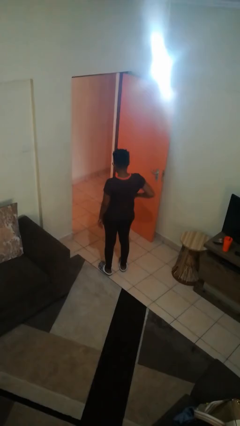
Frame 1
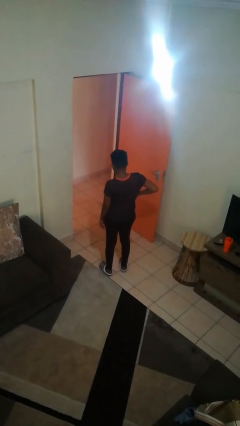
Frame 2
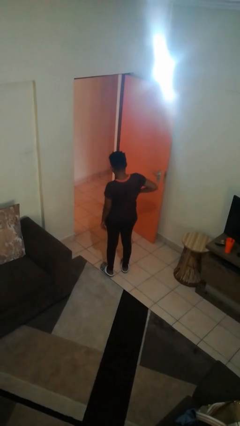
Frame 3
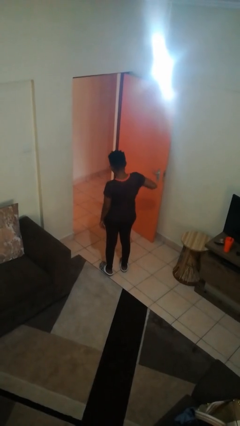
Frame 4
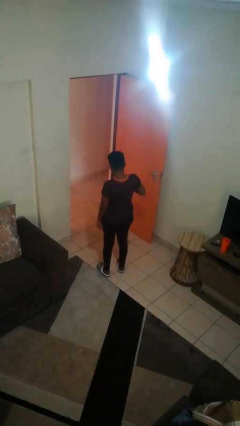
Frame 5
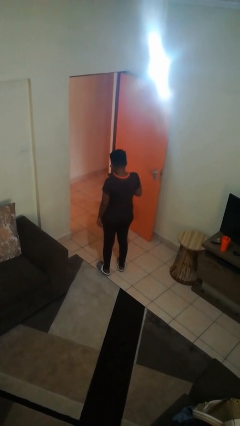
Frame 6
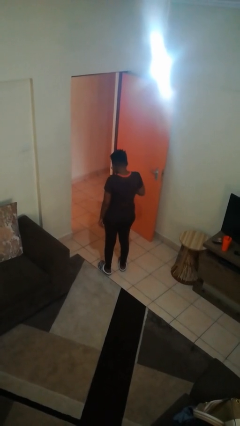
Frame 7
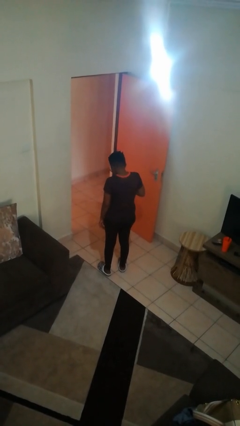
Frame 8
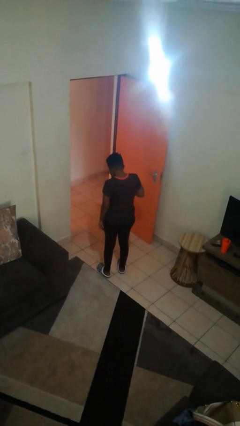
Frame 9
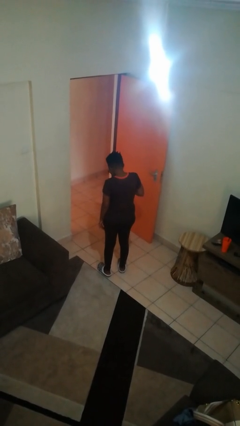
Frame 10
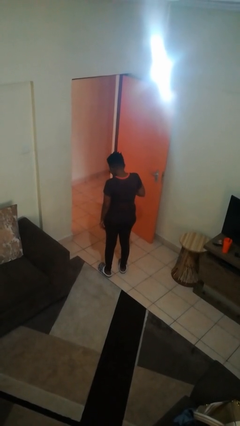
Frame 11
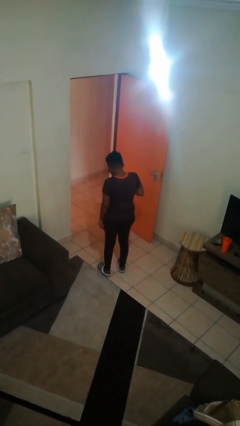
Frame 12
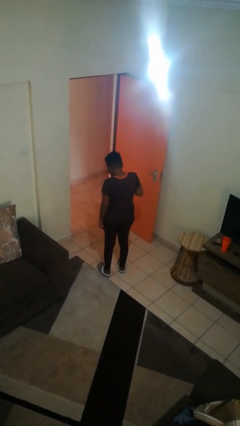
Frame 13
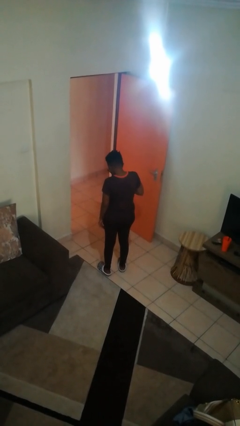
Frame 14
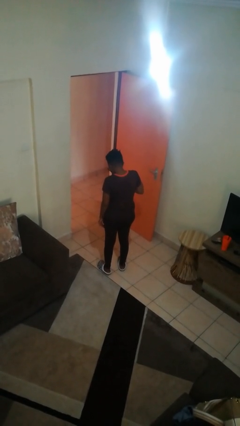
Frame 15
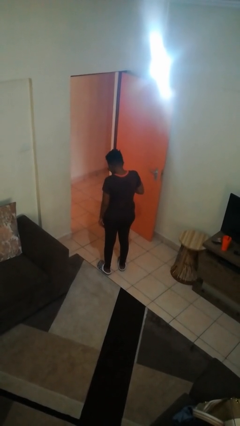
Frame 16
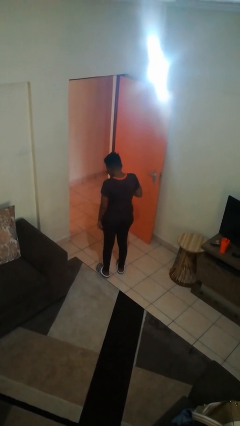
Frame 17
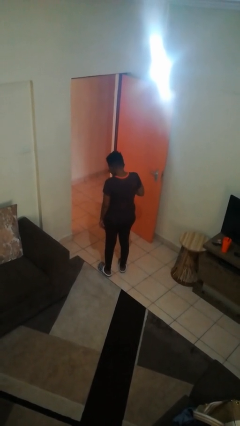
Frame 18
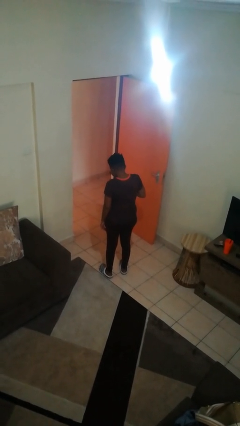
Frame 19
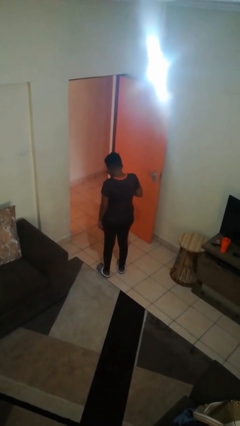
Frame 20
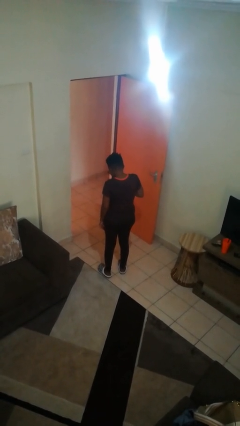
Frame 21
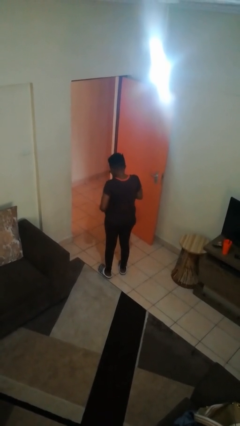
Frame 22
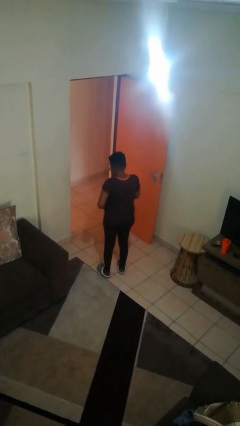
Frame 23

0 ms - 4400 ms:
person takes phone from pocket

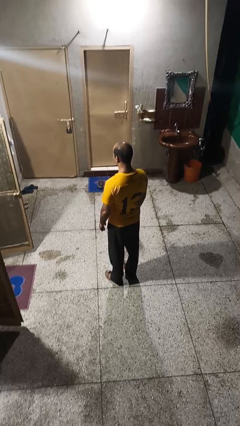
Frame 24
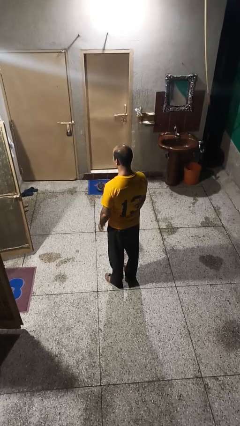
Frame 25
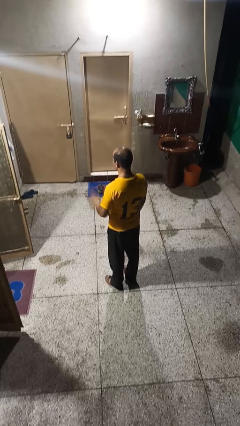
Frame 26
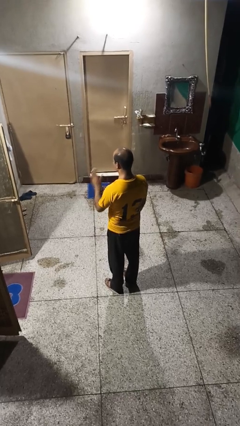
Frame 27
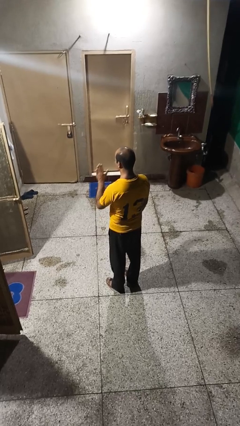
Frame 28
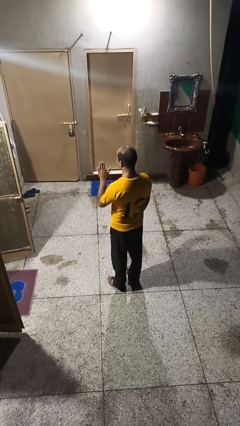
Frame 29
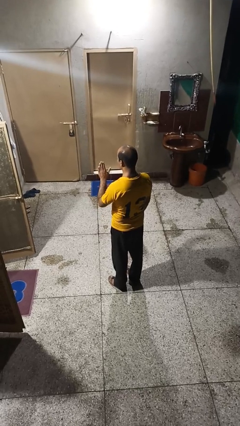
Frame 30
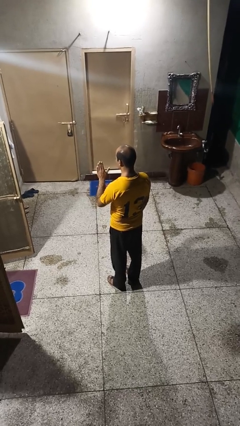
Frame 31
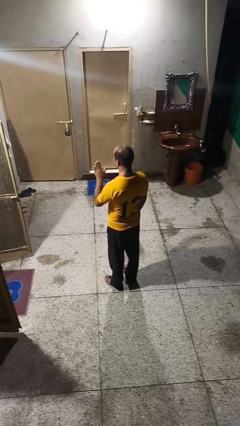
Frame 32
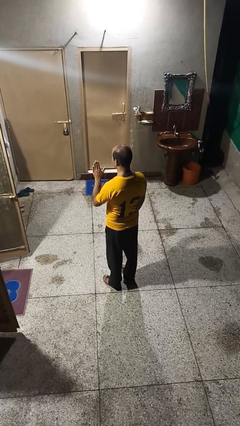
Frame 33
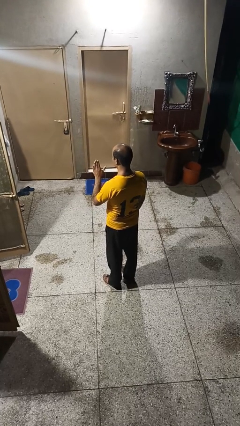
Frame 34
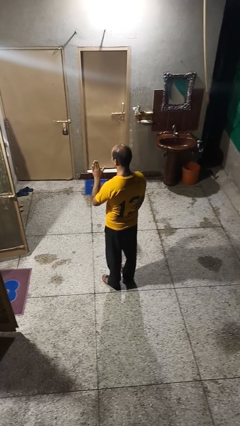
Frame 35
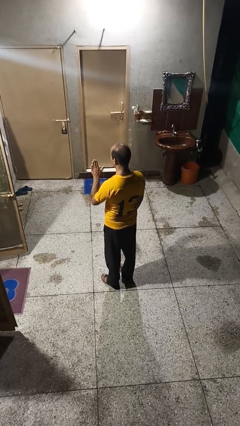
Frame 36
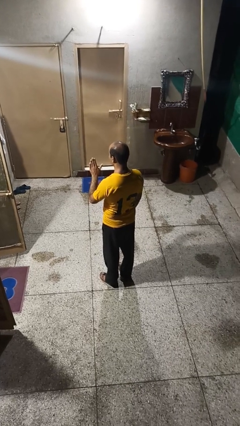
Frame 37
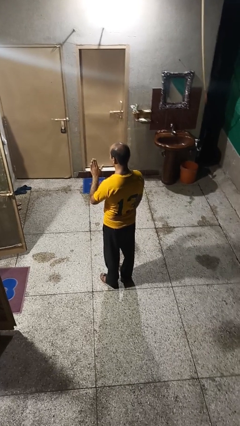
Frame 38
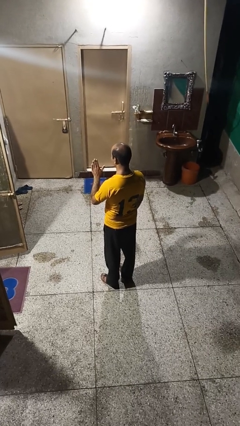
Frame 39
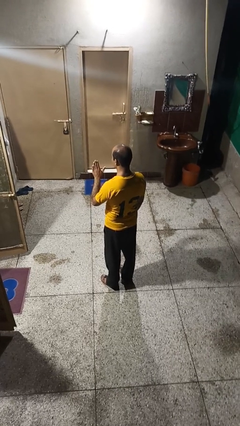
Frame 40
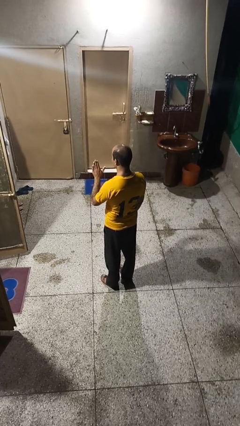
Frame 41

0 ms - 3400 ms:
person gestures stop

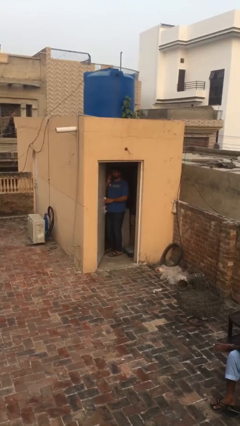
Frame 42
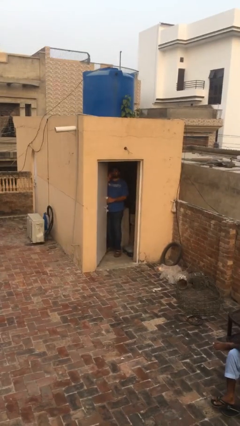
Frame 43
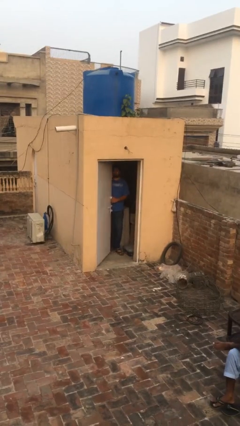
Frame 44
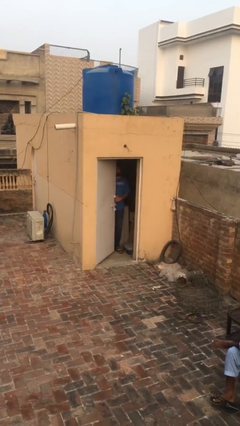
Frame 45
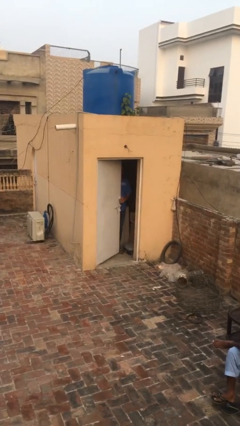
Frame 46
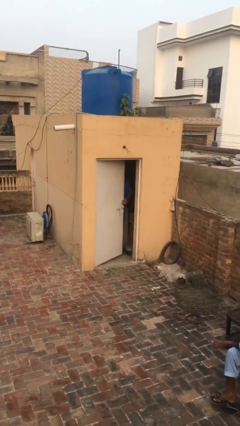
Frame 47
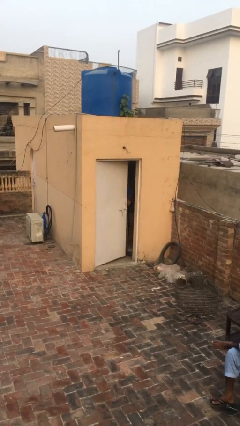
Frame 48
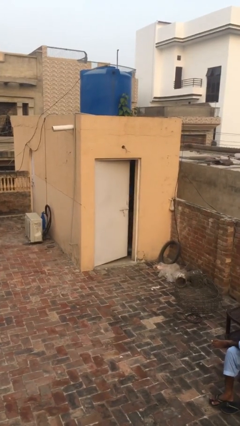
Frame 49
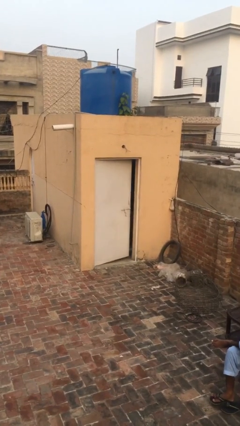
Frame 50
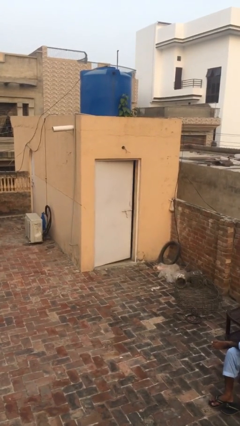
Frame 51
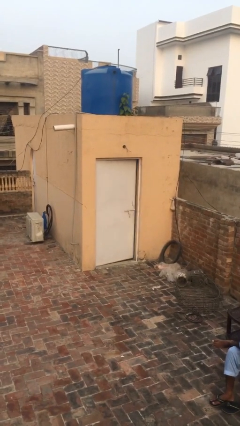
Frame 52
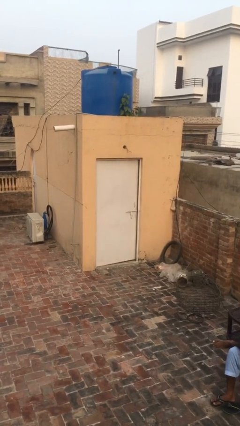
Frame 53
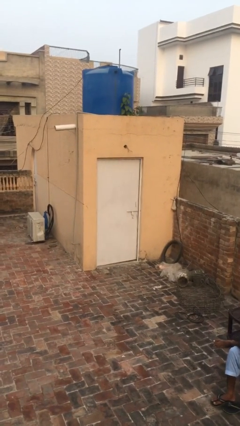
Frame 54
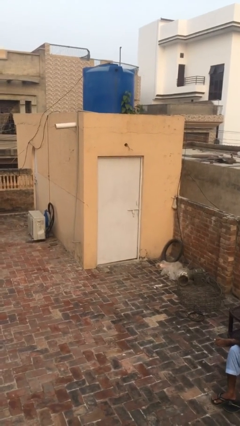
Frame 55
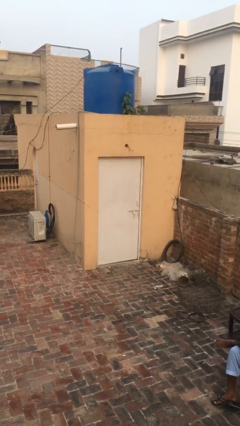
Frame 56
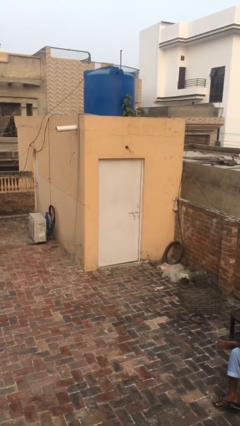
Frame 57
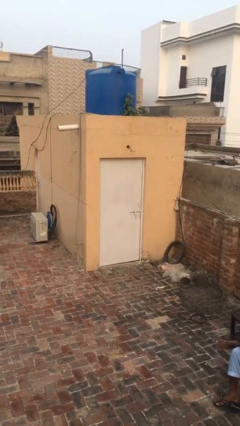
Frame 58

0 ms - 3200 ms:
person closes facility door

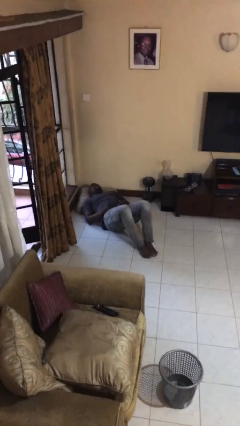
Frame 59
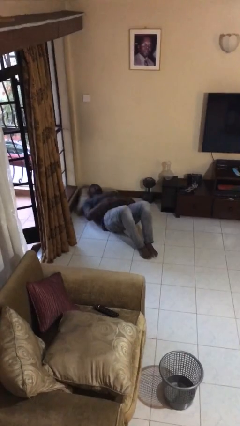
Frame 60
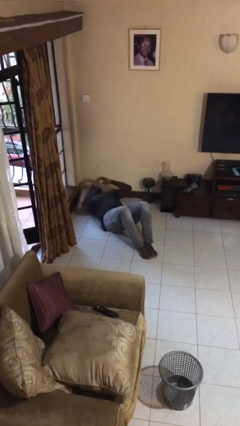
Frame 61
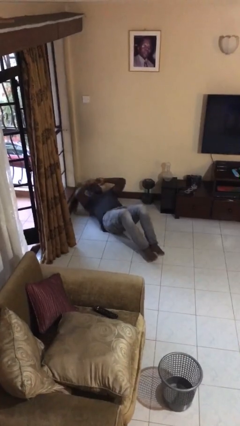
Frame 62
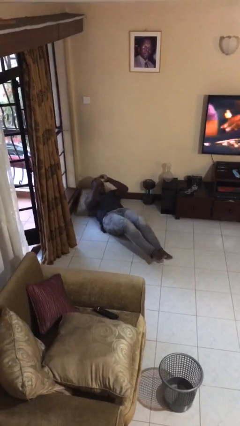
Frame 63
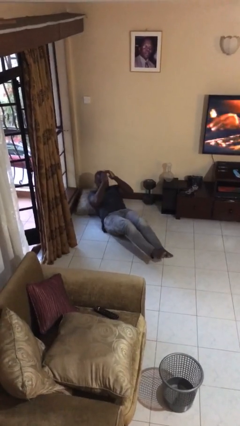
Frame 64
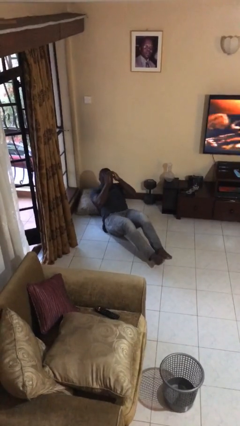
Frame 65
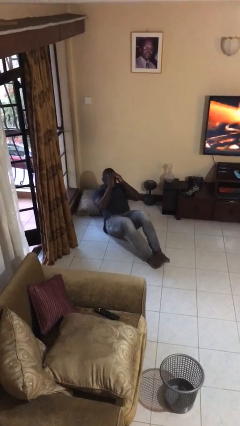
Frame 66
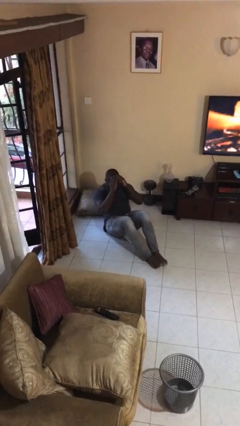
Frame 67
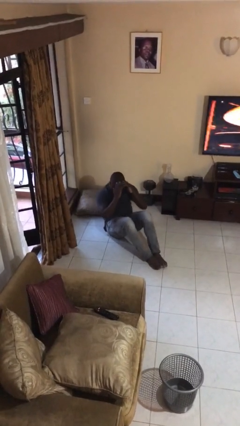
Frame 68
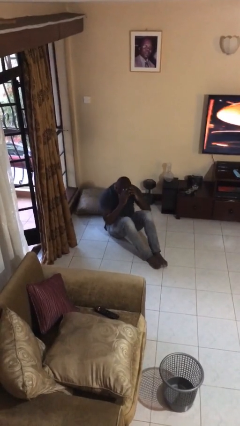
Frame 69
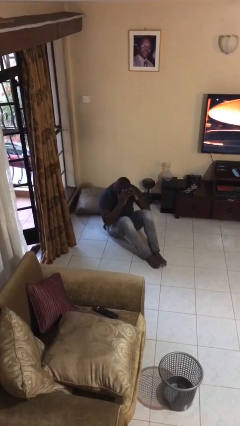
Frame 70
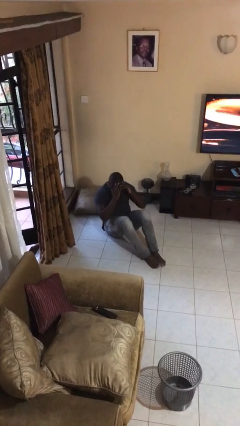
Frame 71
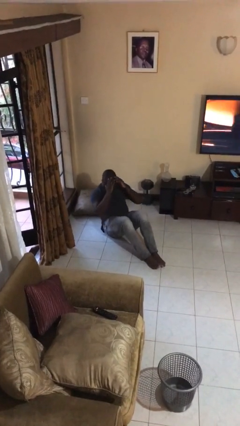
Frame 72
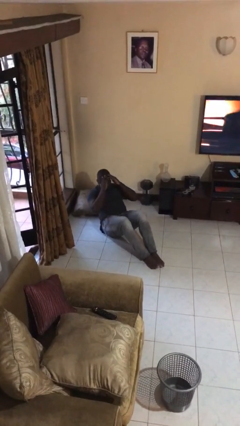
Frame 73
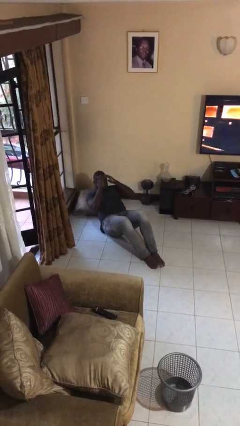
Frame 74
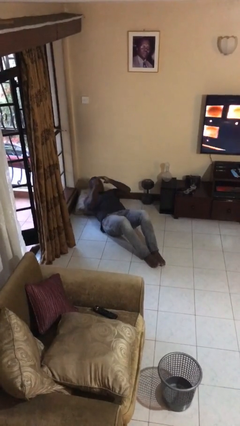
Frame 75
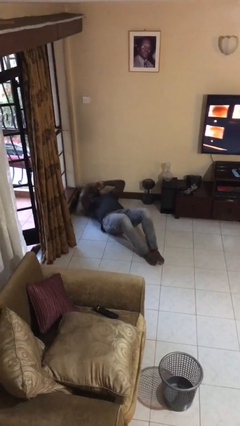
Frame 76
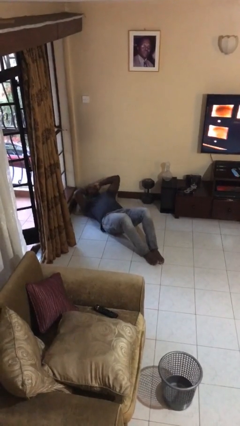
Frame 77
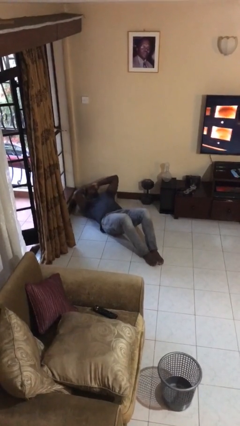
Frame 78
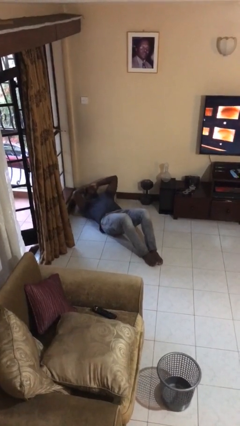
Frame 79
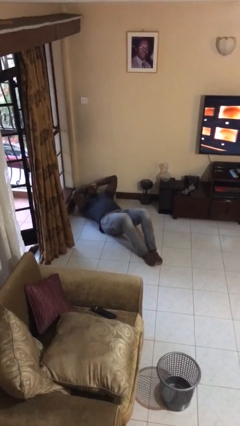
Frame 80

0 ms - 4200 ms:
person exercises with situp

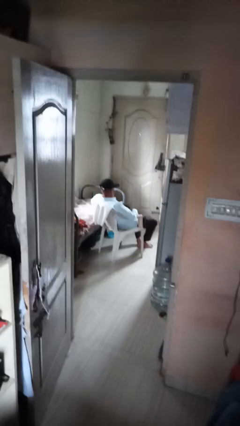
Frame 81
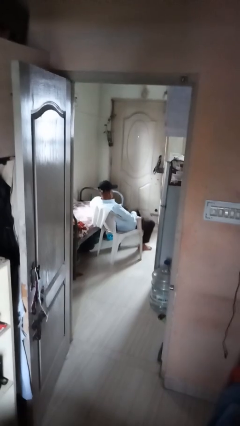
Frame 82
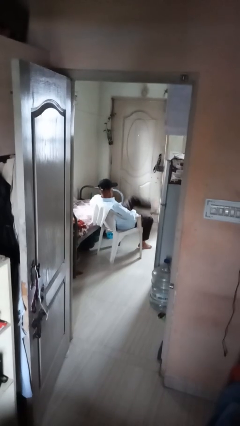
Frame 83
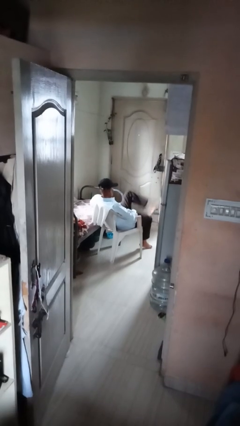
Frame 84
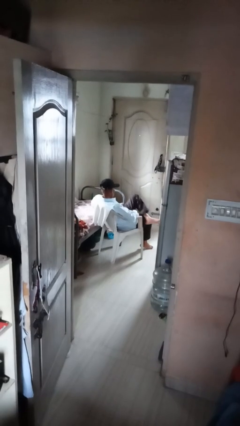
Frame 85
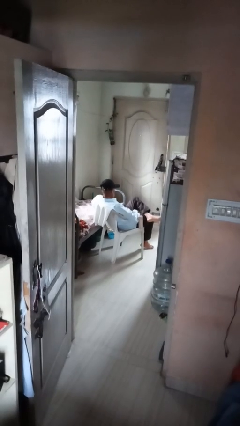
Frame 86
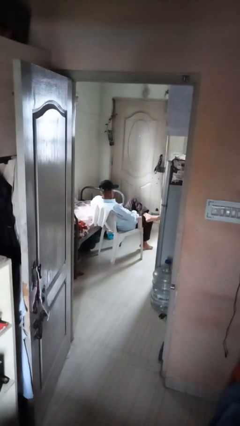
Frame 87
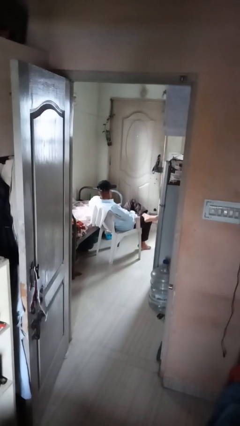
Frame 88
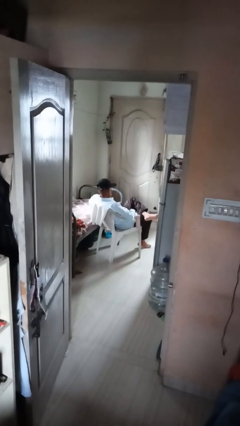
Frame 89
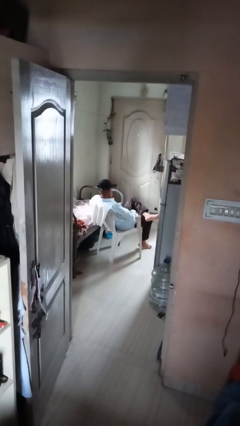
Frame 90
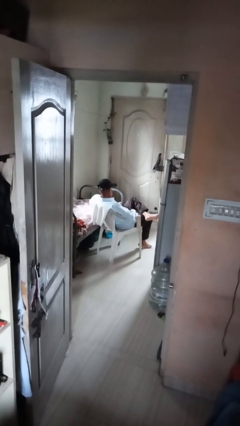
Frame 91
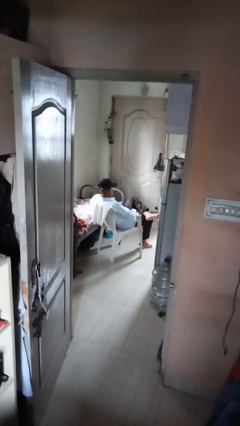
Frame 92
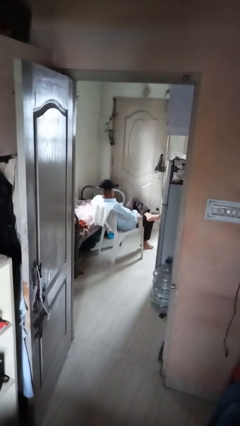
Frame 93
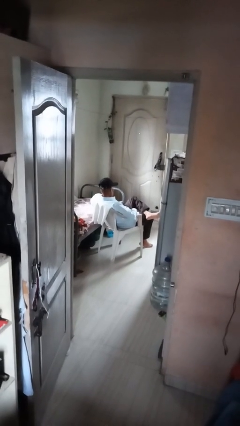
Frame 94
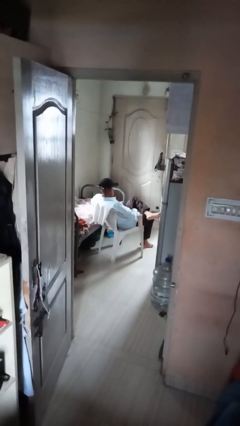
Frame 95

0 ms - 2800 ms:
person crosses legs
